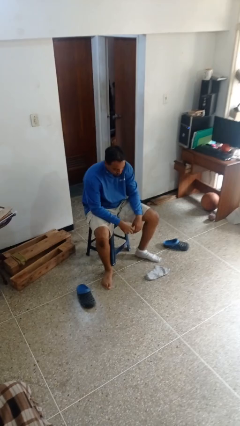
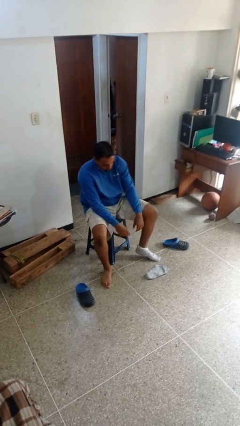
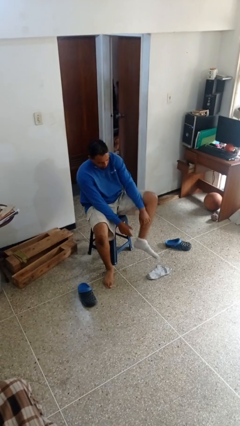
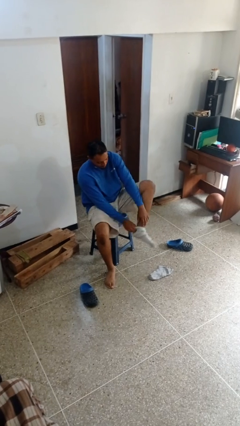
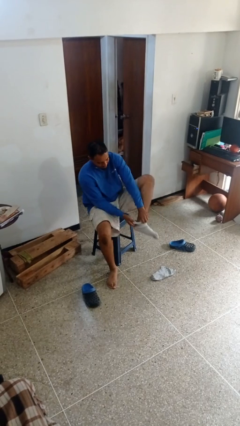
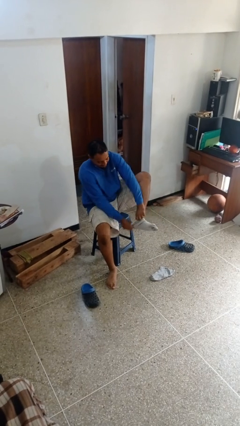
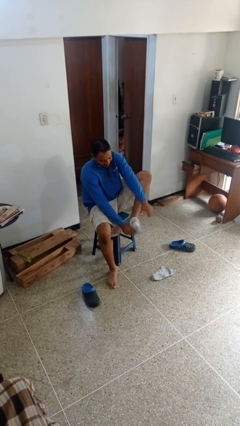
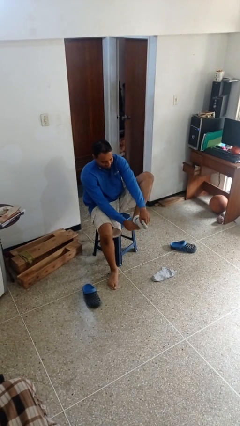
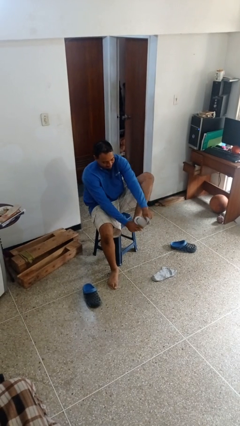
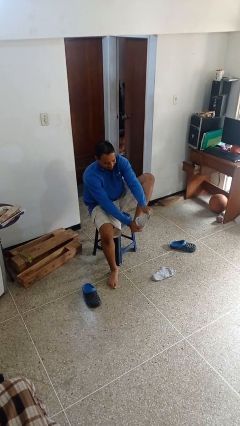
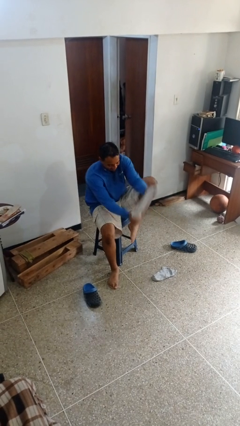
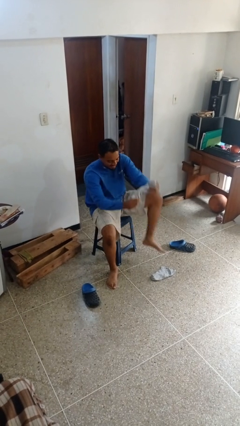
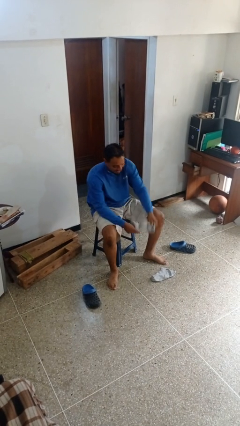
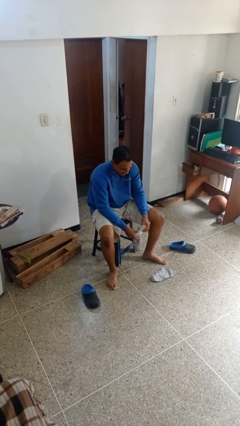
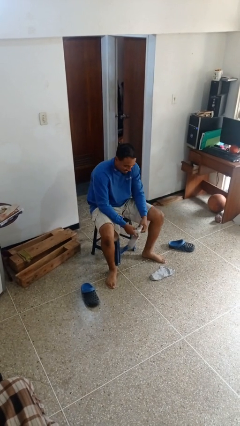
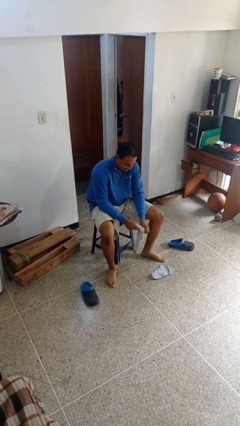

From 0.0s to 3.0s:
person takes off socks

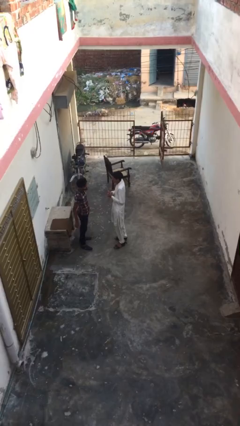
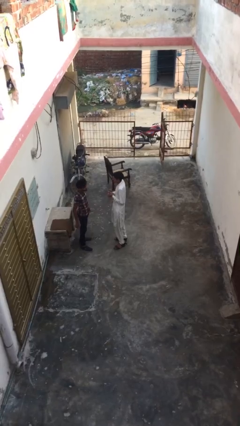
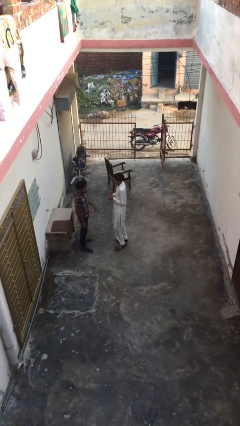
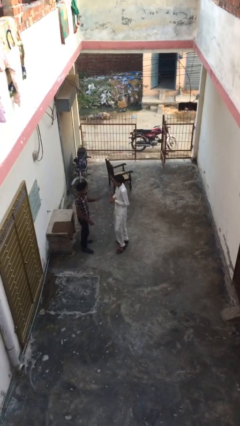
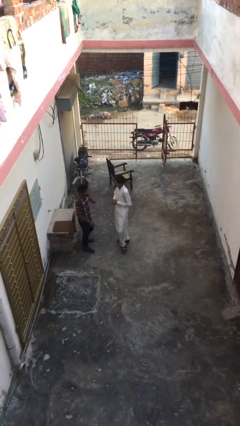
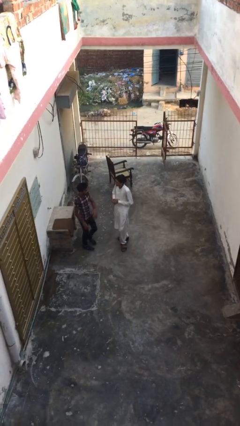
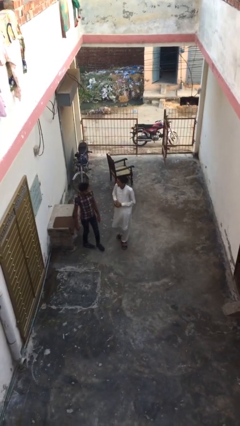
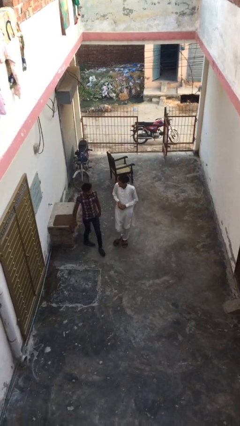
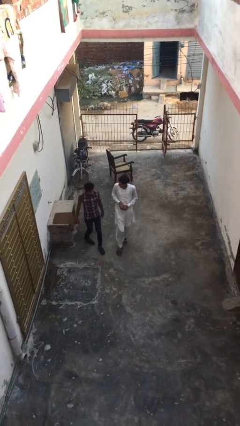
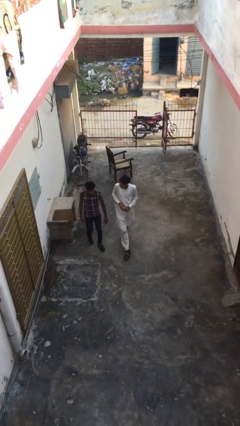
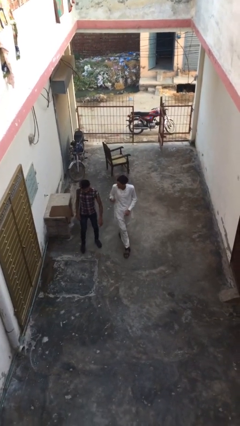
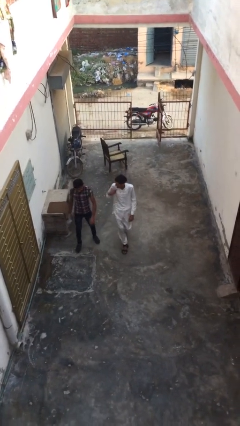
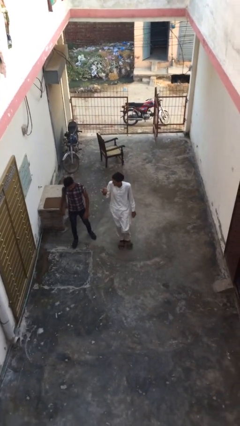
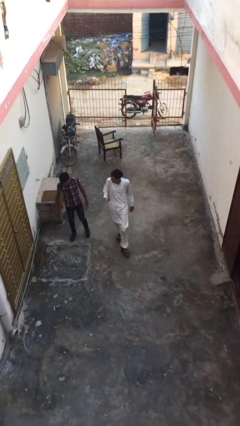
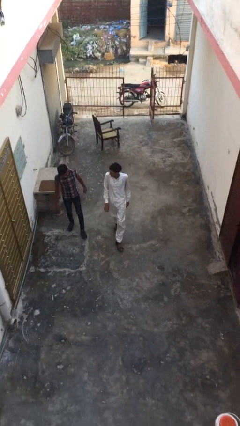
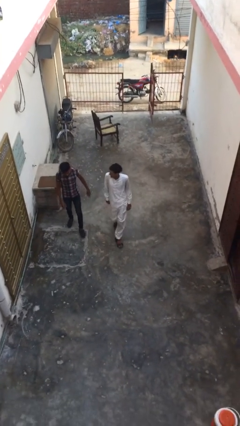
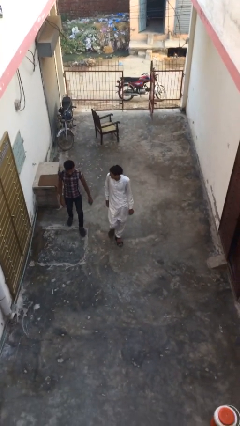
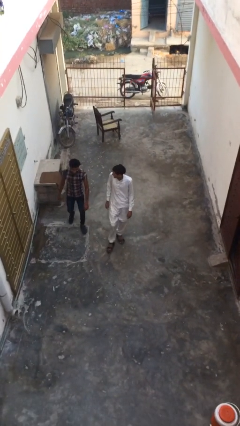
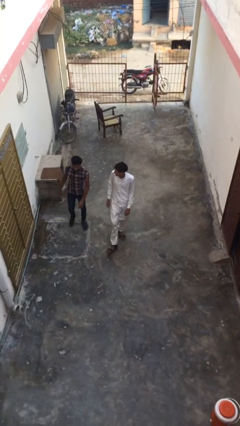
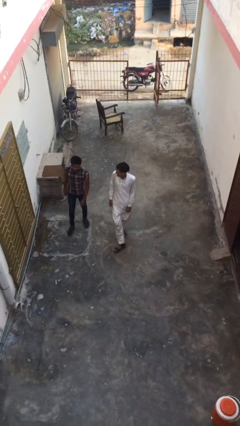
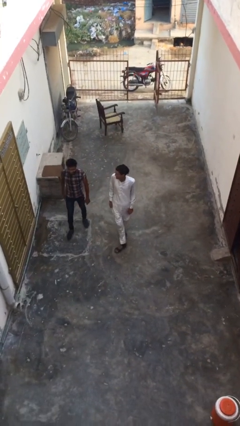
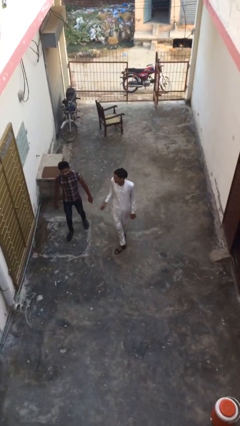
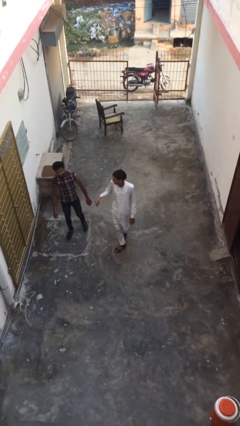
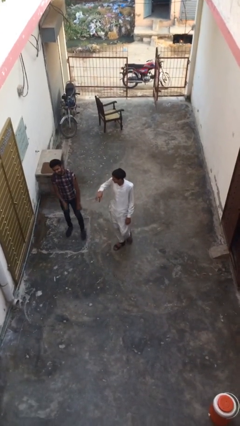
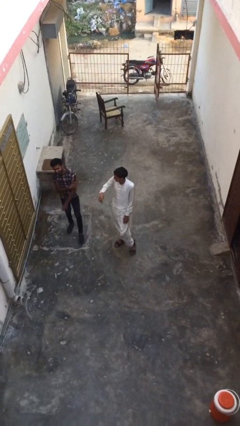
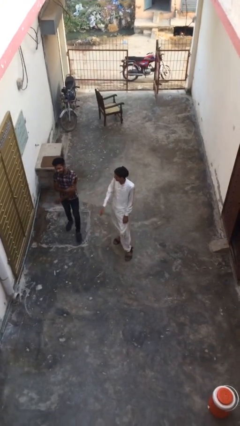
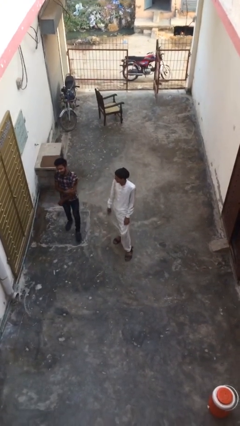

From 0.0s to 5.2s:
person talks to person

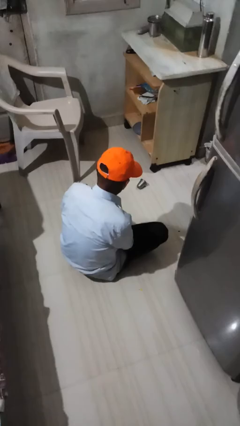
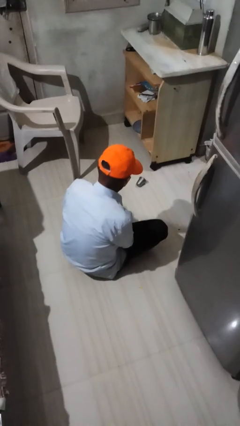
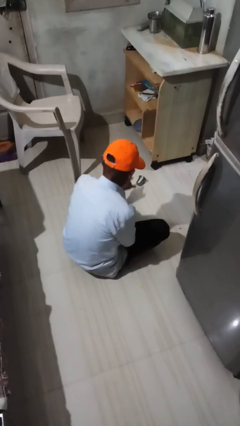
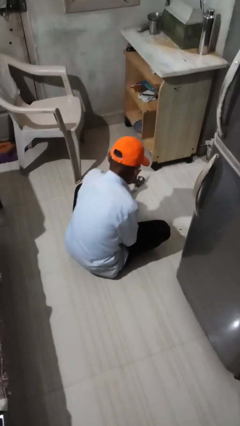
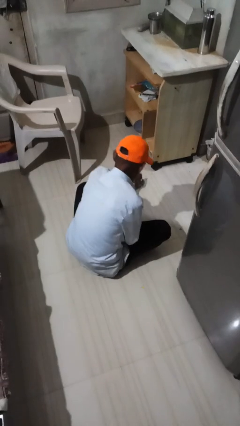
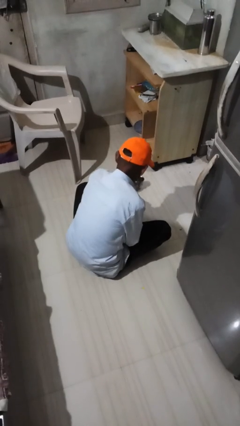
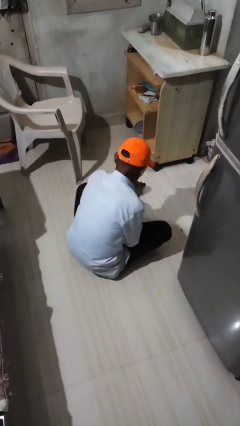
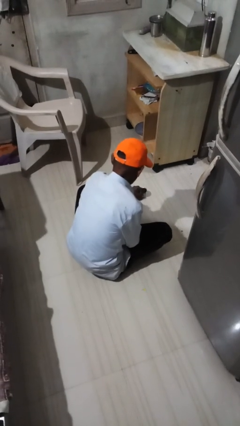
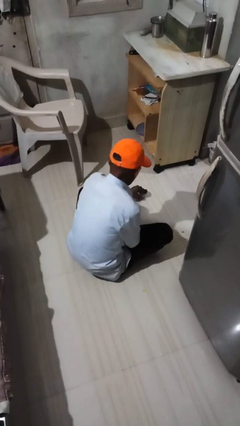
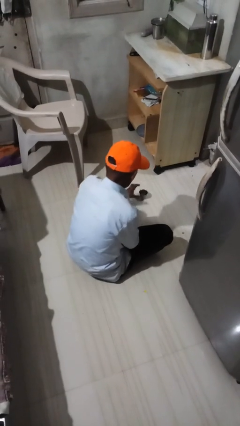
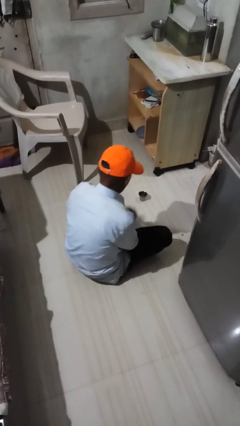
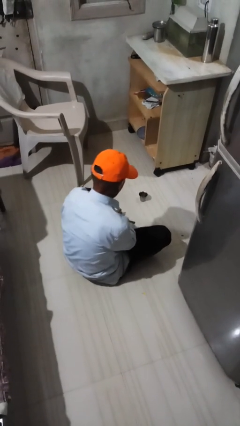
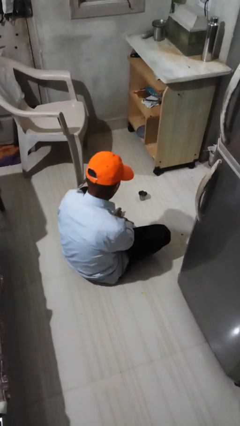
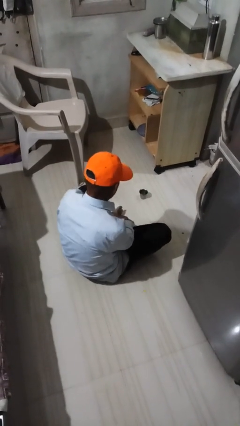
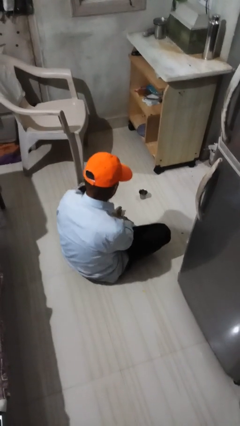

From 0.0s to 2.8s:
person sets upright glass

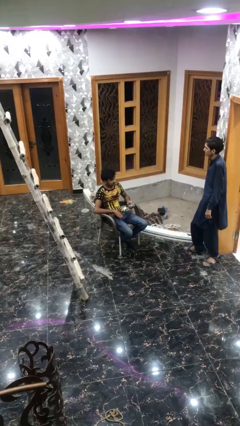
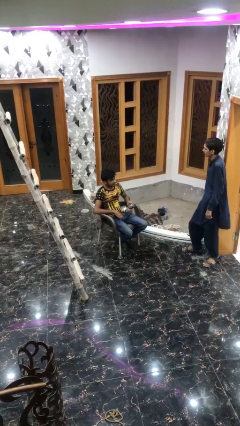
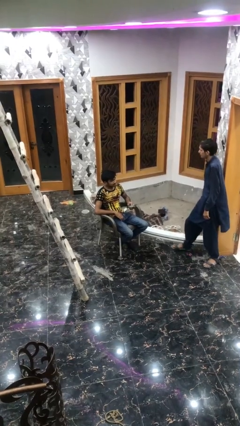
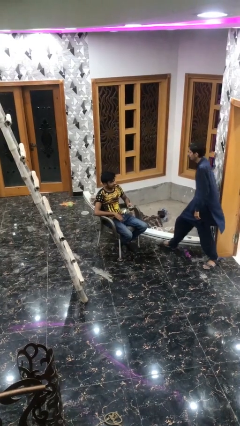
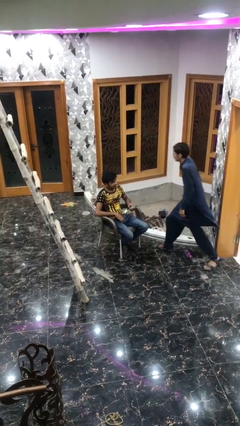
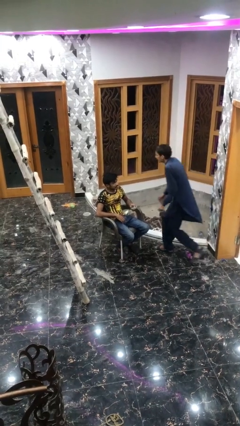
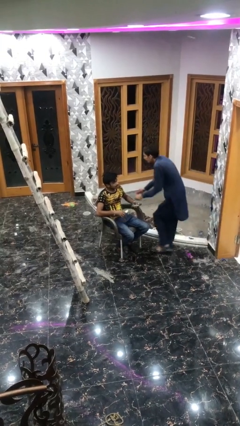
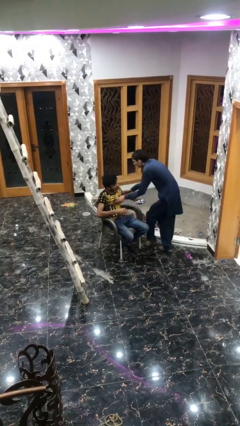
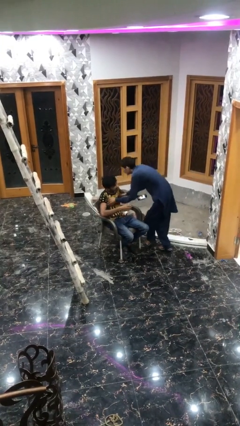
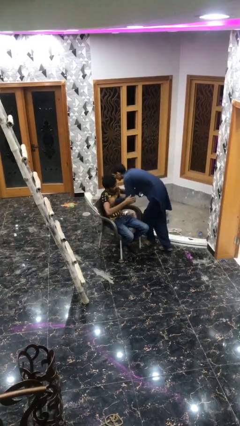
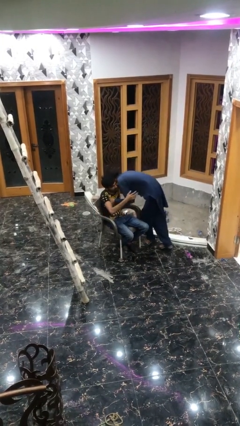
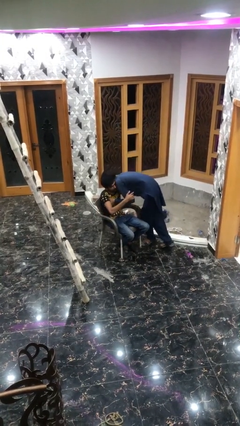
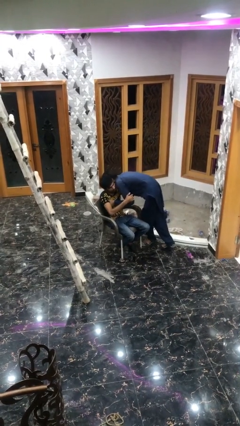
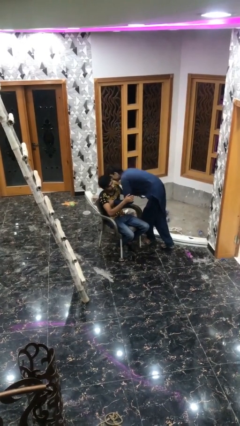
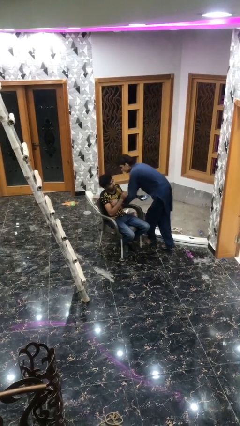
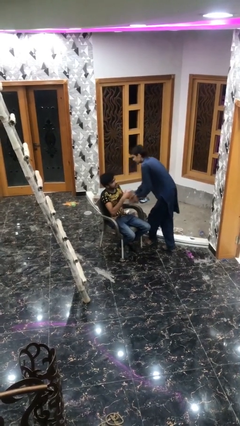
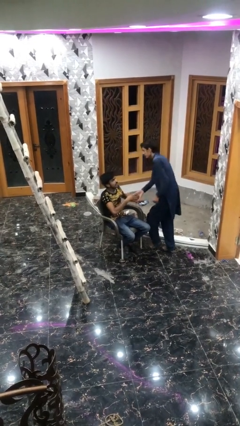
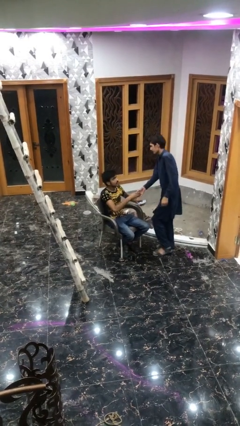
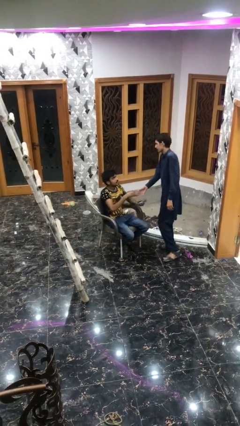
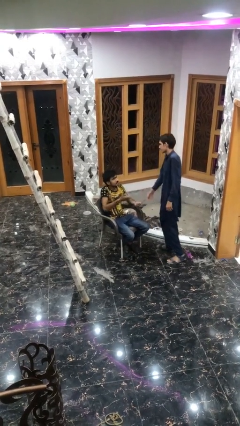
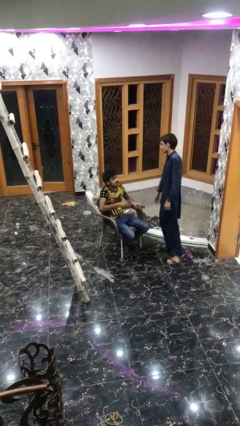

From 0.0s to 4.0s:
person embraces person

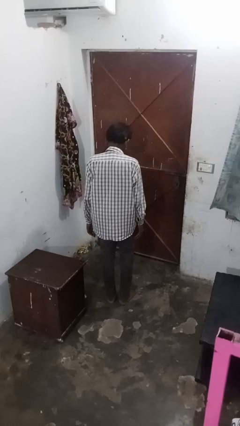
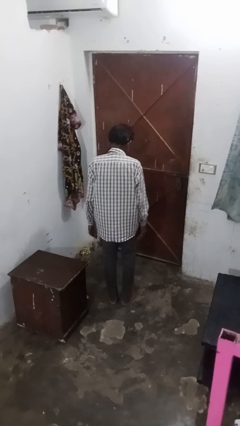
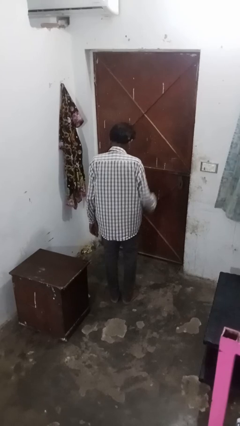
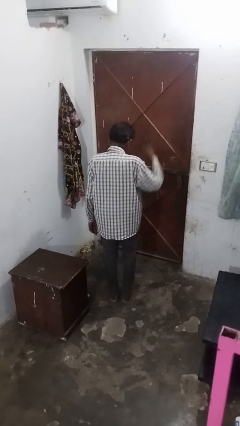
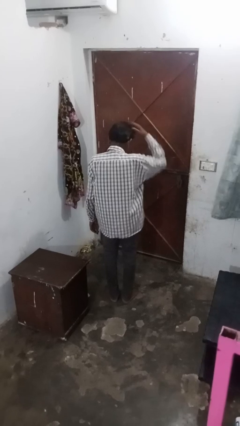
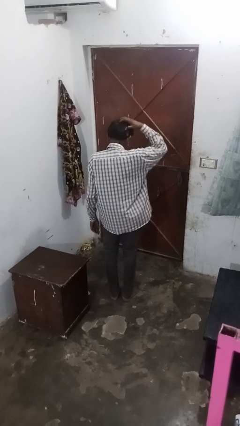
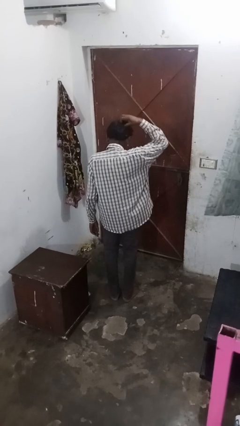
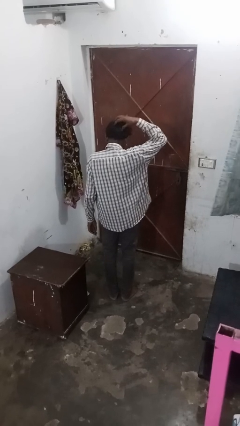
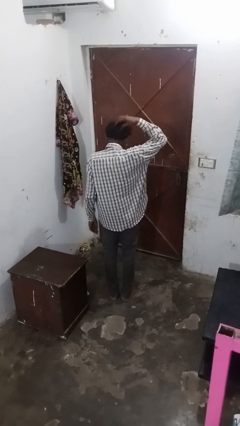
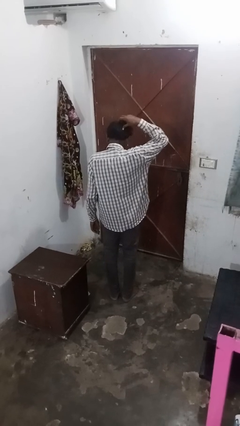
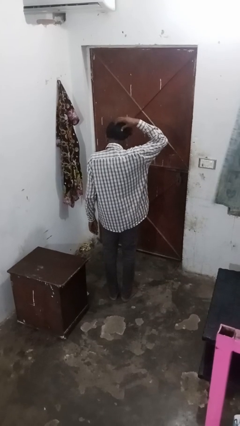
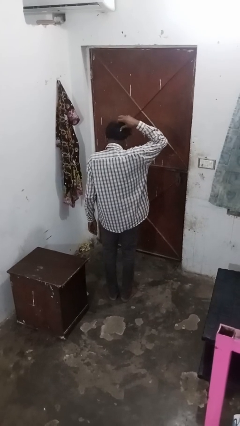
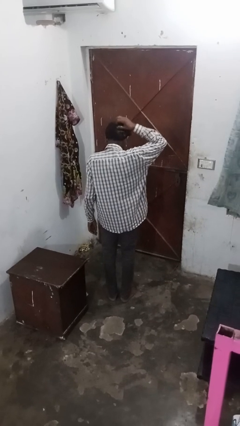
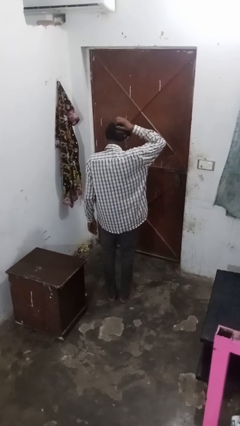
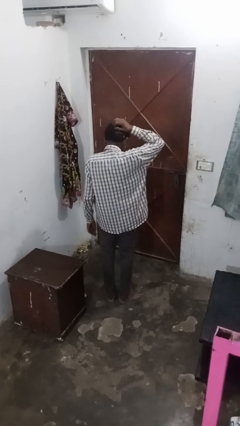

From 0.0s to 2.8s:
person strokes hair
